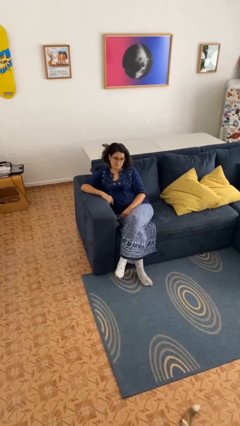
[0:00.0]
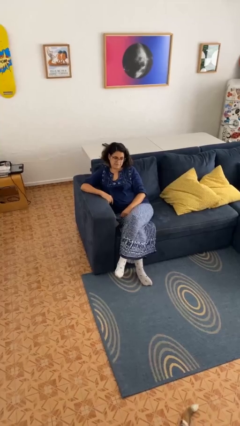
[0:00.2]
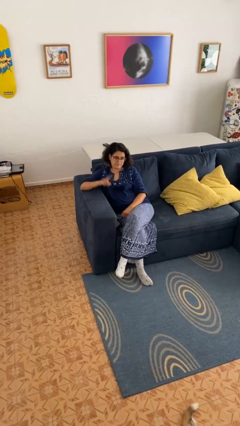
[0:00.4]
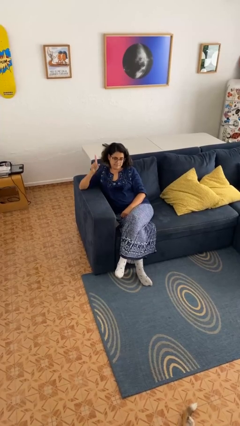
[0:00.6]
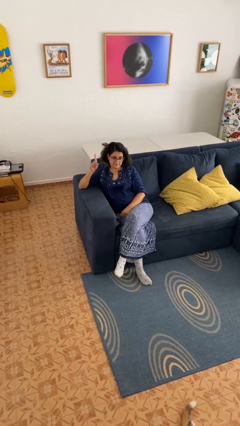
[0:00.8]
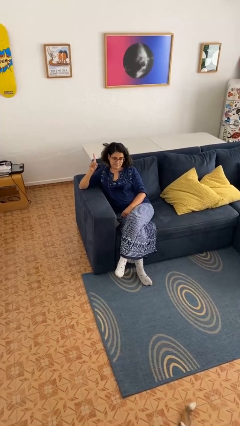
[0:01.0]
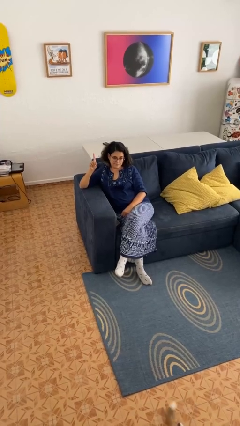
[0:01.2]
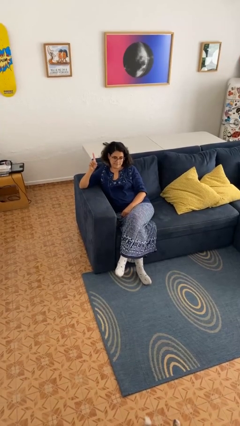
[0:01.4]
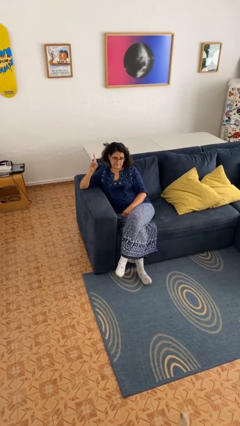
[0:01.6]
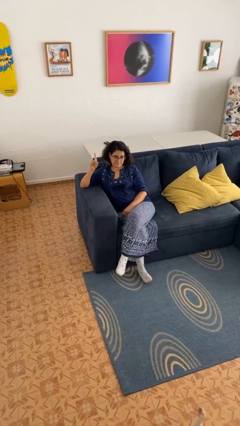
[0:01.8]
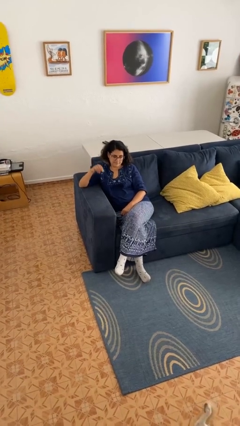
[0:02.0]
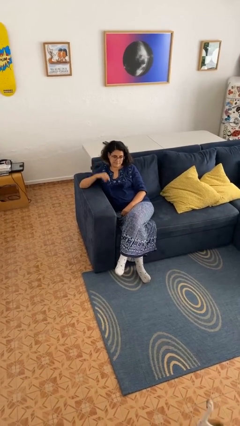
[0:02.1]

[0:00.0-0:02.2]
person gestures number one

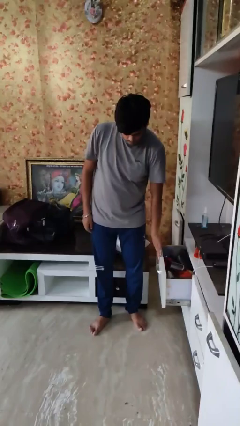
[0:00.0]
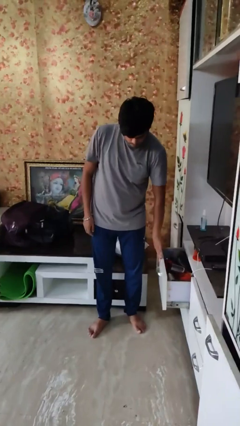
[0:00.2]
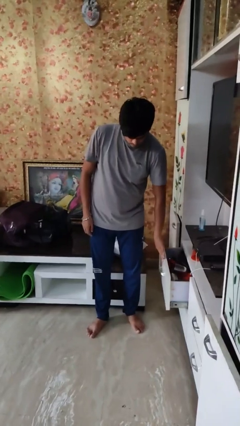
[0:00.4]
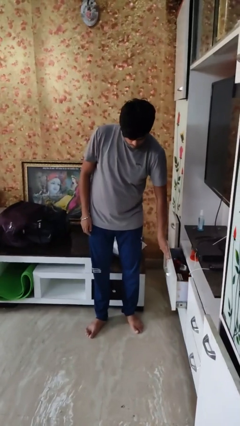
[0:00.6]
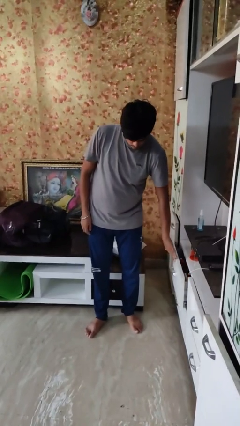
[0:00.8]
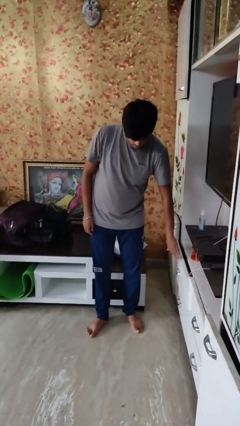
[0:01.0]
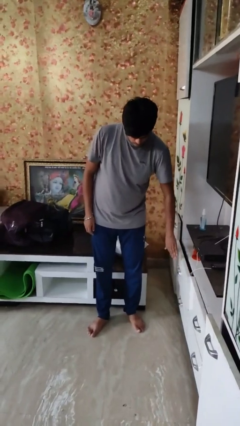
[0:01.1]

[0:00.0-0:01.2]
person closes kitchen drawer

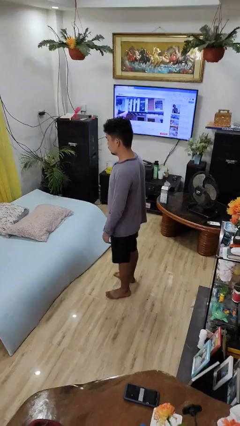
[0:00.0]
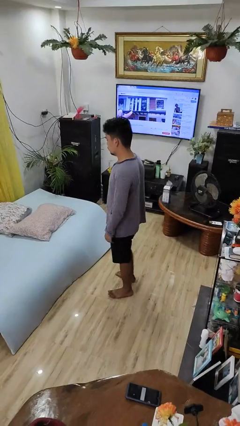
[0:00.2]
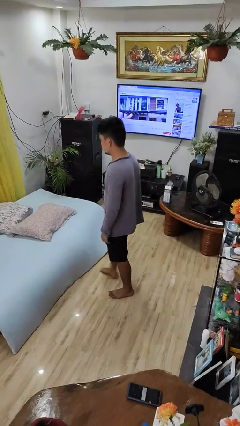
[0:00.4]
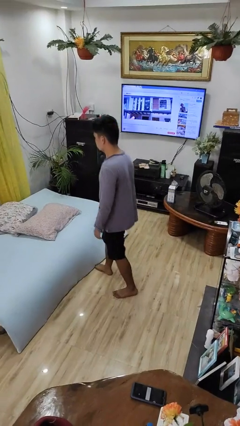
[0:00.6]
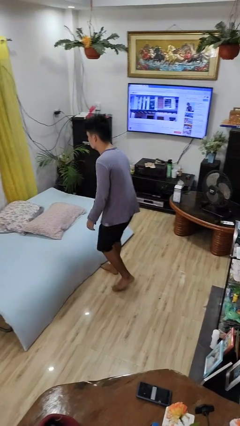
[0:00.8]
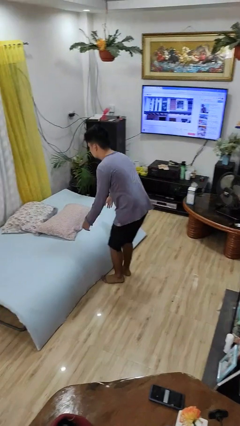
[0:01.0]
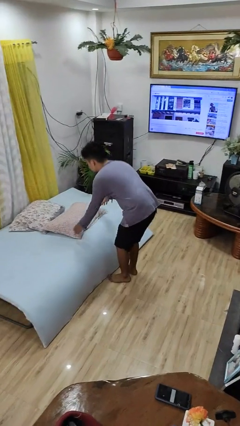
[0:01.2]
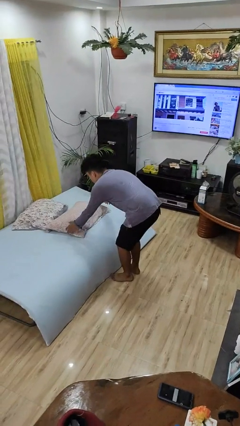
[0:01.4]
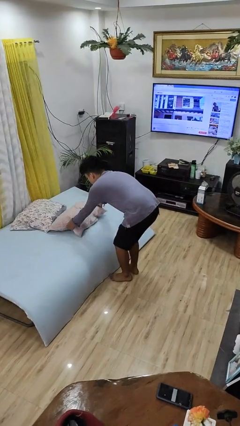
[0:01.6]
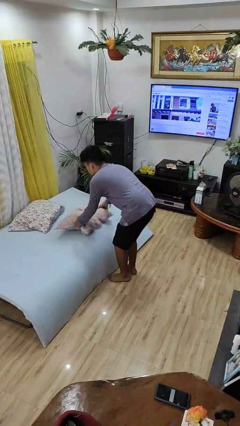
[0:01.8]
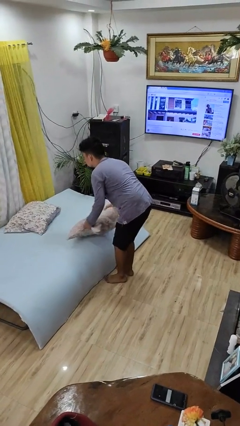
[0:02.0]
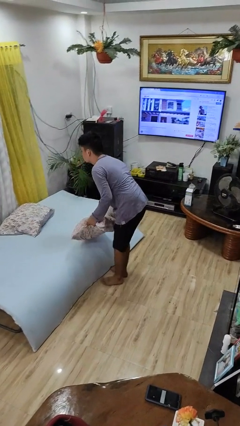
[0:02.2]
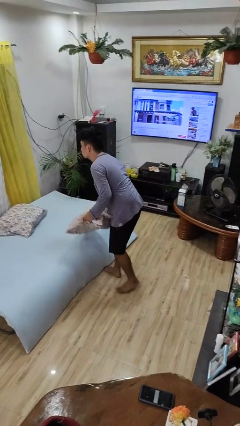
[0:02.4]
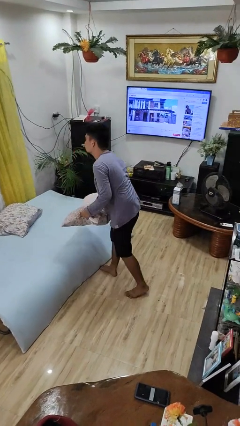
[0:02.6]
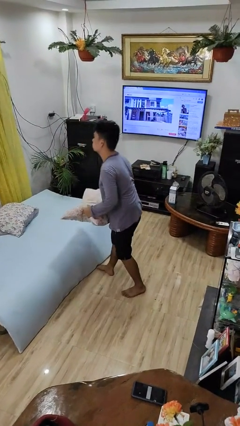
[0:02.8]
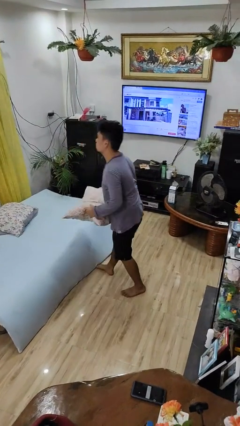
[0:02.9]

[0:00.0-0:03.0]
person picks up object from bed

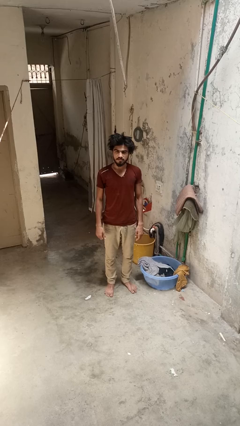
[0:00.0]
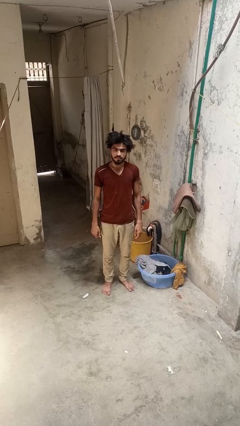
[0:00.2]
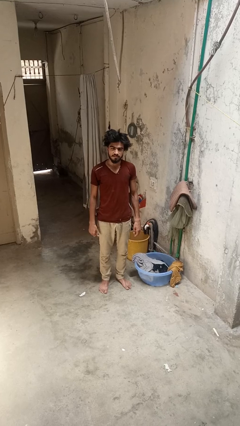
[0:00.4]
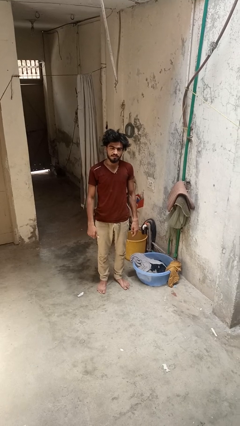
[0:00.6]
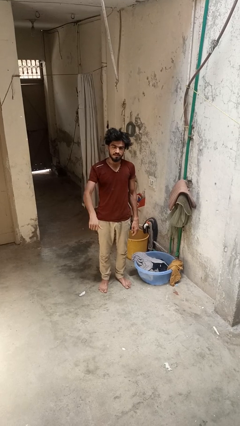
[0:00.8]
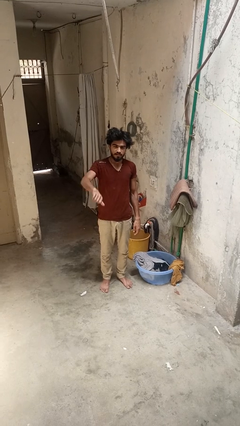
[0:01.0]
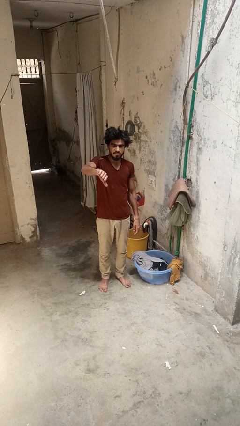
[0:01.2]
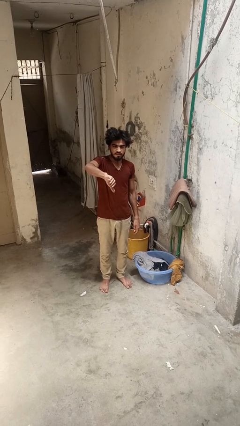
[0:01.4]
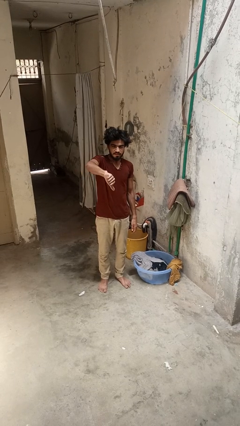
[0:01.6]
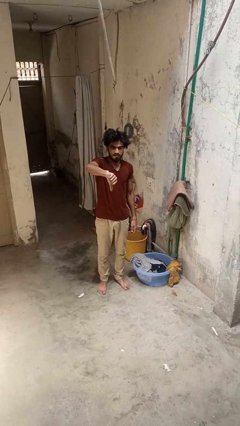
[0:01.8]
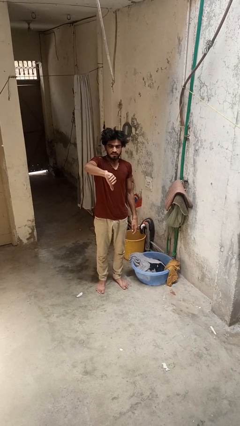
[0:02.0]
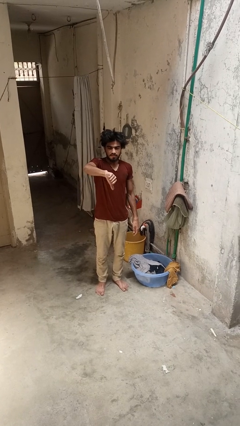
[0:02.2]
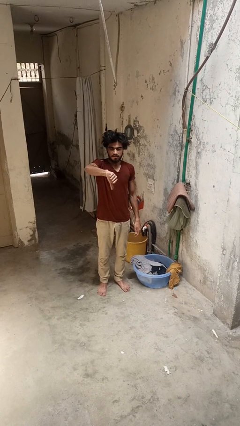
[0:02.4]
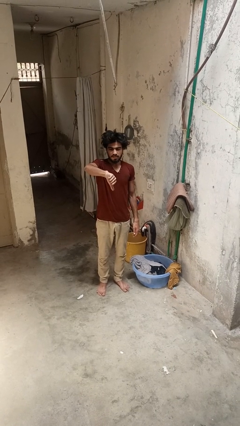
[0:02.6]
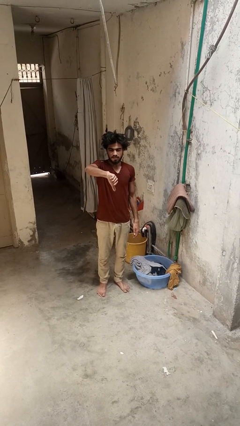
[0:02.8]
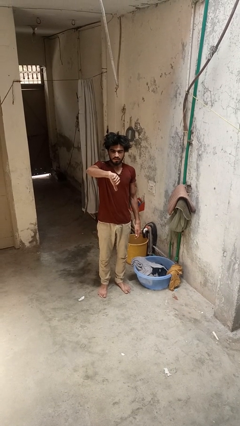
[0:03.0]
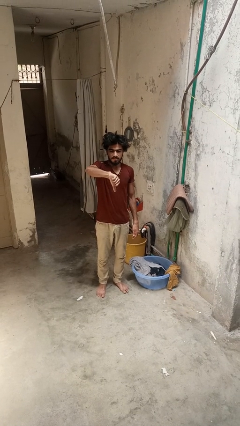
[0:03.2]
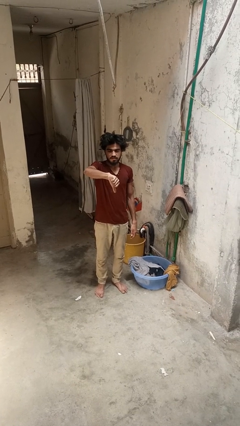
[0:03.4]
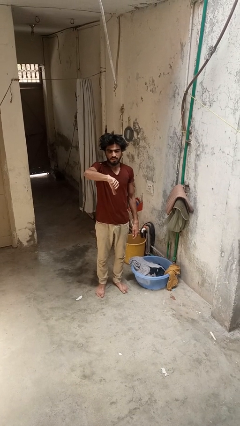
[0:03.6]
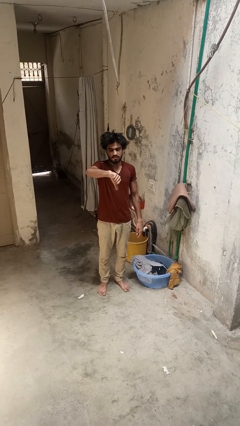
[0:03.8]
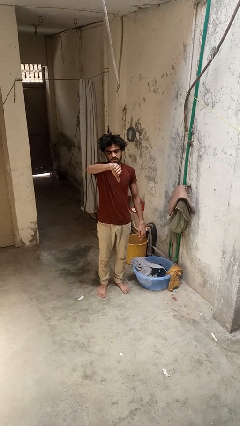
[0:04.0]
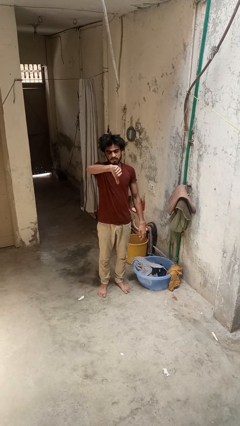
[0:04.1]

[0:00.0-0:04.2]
person gestures thumbs down

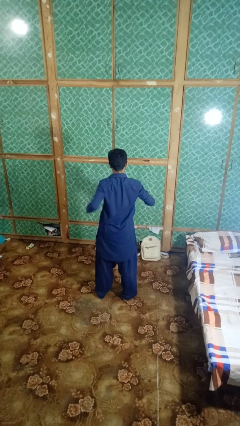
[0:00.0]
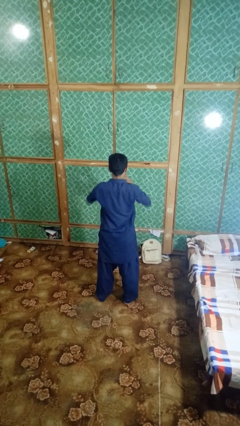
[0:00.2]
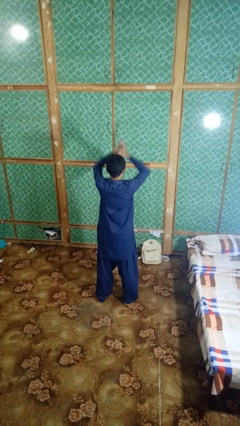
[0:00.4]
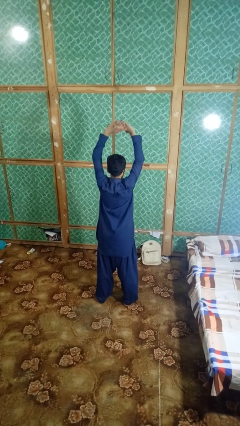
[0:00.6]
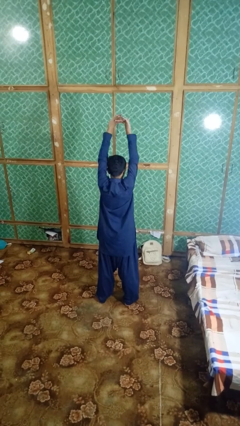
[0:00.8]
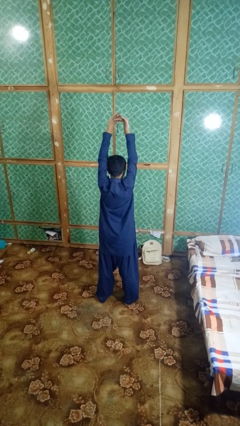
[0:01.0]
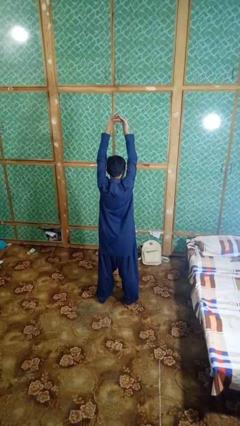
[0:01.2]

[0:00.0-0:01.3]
person stretches arms over head

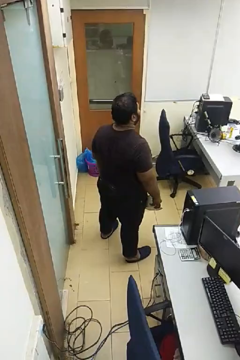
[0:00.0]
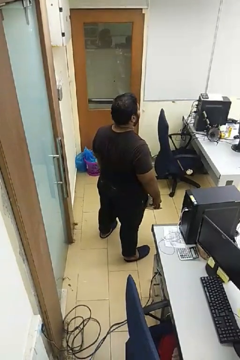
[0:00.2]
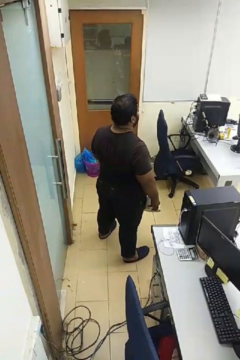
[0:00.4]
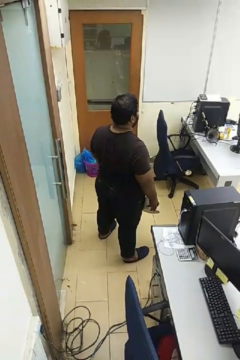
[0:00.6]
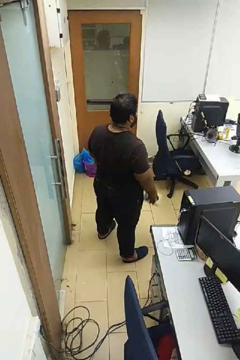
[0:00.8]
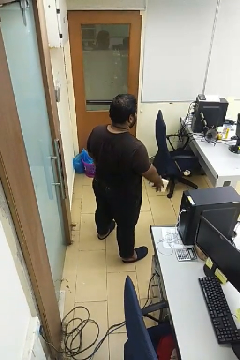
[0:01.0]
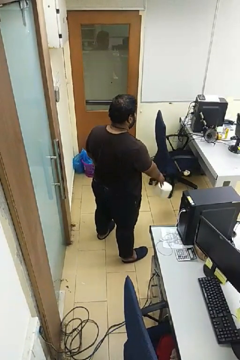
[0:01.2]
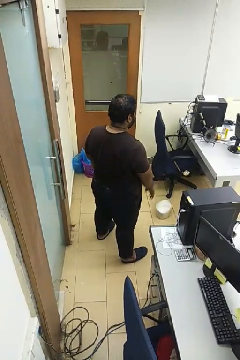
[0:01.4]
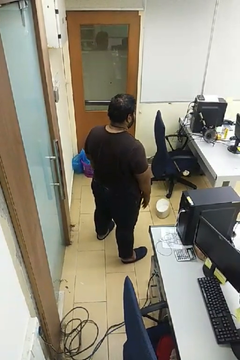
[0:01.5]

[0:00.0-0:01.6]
person throws object to ground

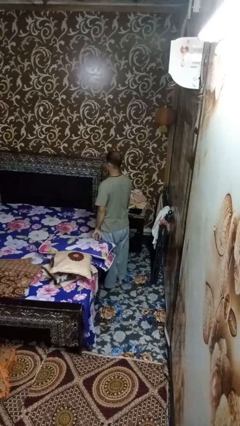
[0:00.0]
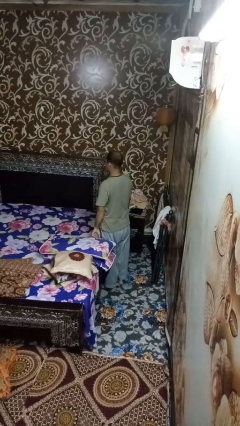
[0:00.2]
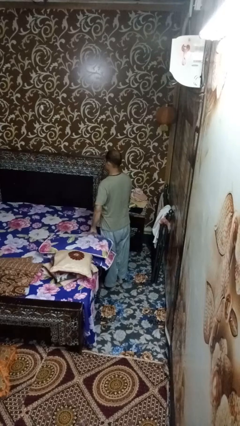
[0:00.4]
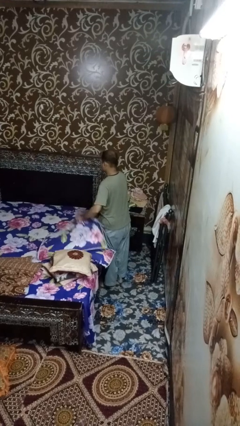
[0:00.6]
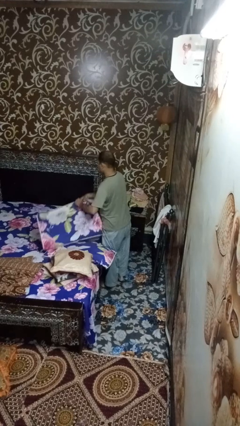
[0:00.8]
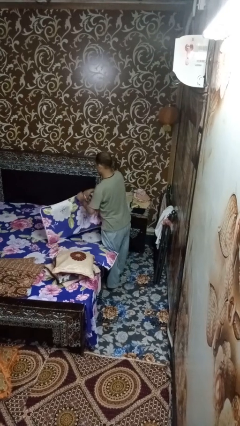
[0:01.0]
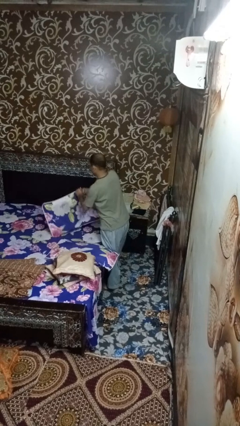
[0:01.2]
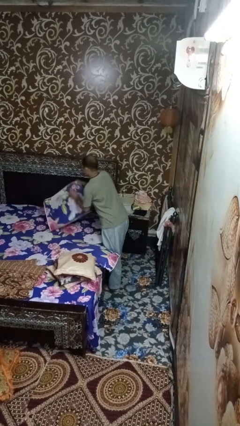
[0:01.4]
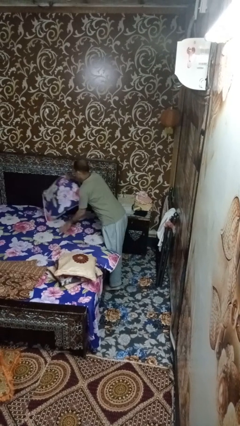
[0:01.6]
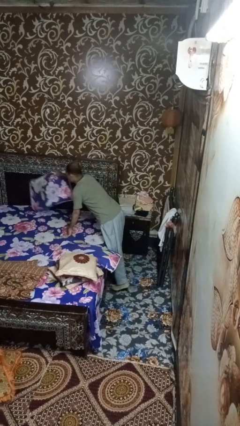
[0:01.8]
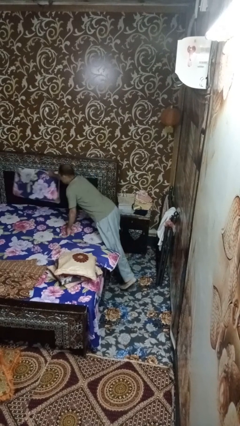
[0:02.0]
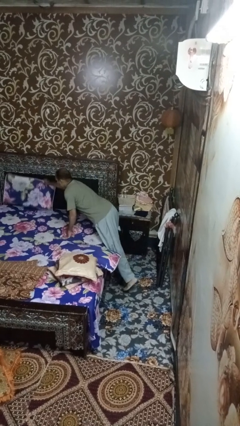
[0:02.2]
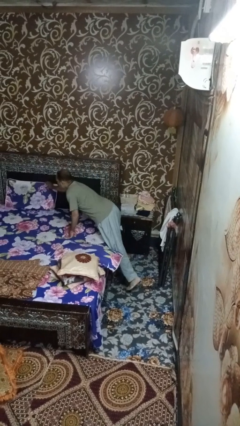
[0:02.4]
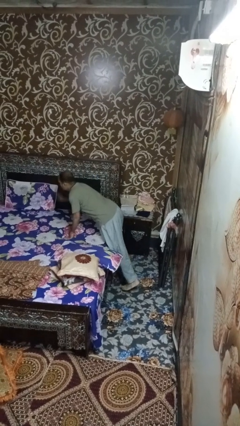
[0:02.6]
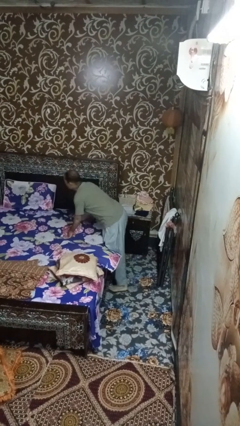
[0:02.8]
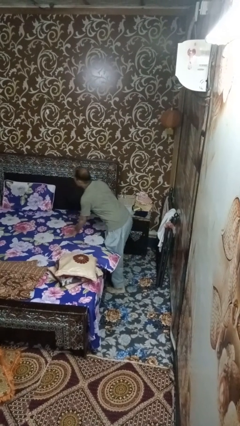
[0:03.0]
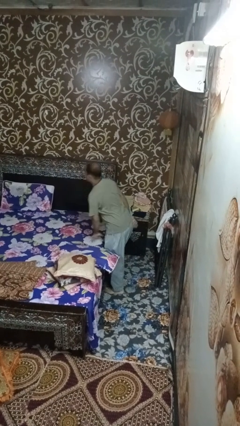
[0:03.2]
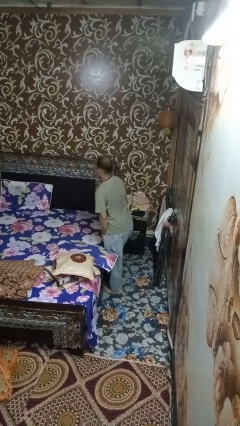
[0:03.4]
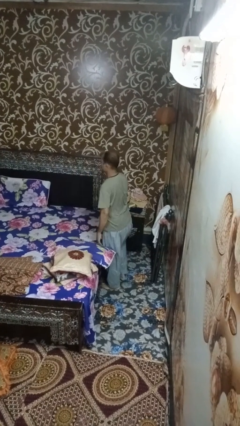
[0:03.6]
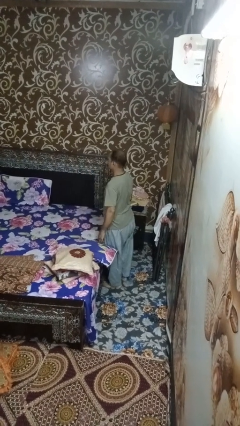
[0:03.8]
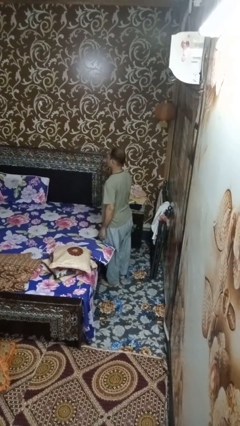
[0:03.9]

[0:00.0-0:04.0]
person makes bed
